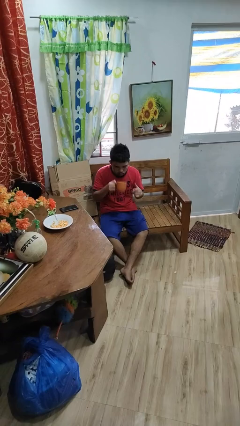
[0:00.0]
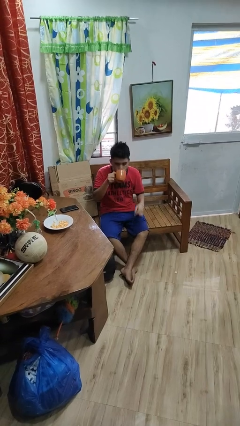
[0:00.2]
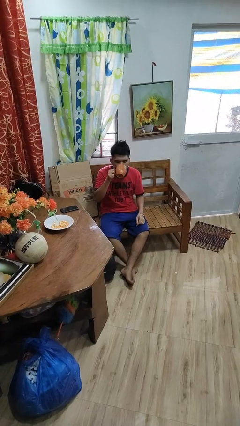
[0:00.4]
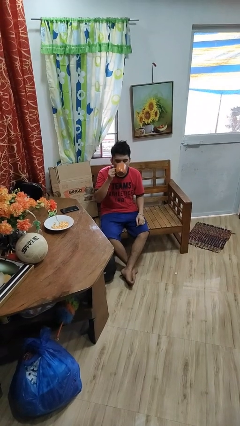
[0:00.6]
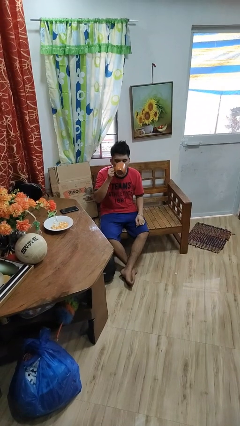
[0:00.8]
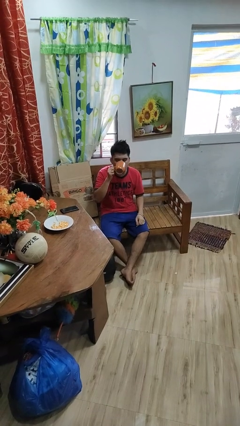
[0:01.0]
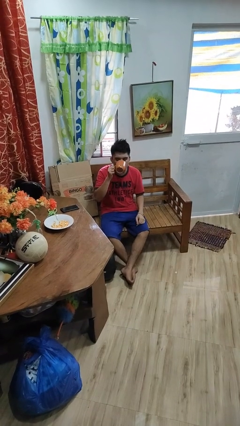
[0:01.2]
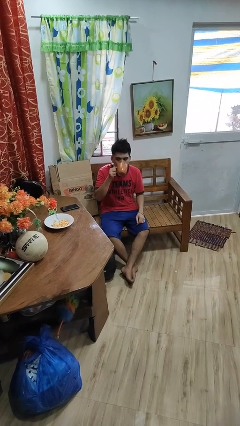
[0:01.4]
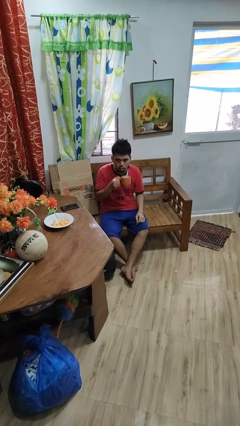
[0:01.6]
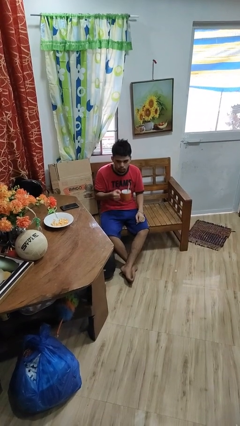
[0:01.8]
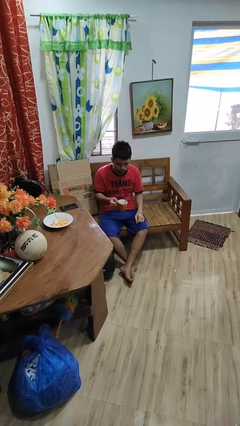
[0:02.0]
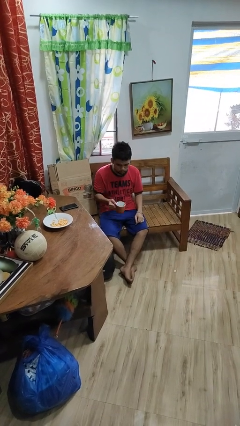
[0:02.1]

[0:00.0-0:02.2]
person drinks from mug

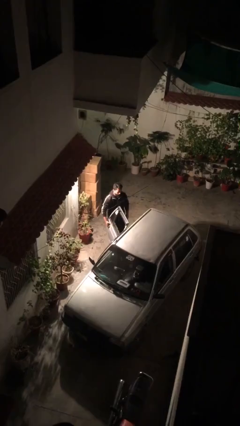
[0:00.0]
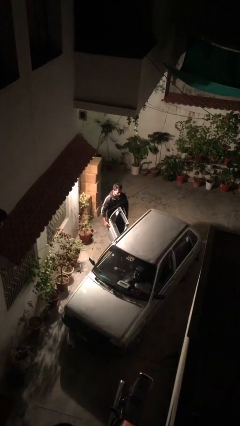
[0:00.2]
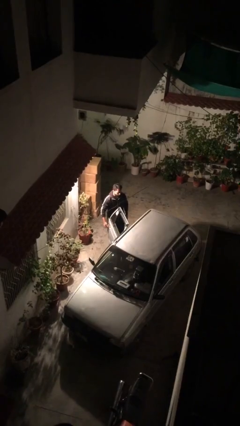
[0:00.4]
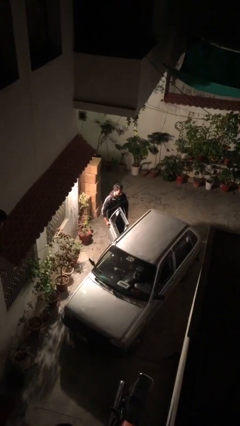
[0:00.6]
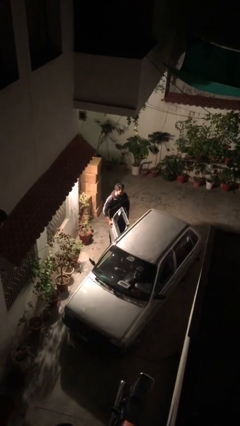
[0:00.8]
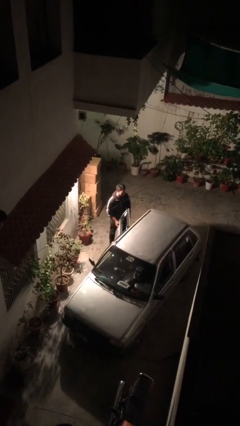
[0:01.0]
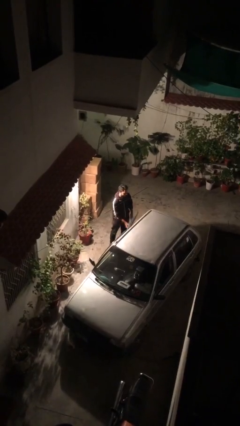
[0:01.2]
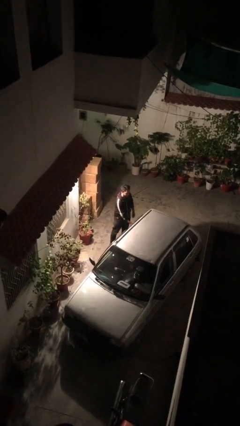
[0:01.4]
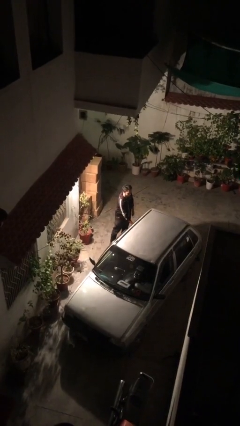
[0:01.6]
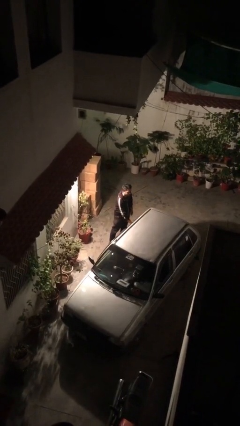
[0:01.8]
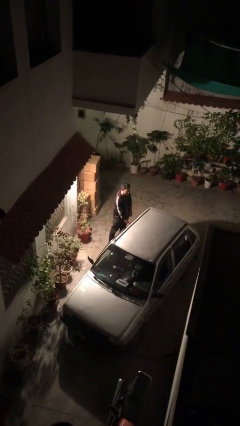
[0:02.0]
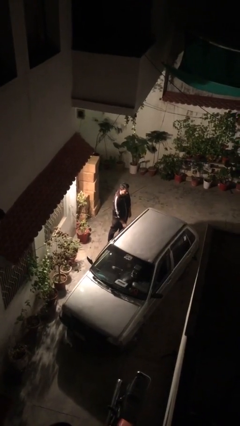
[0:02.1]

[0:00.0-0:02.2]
person closes car door

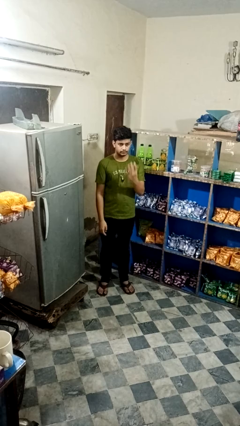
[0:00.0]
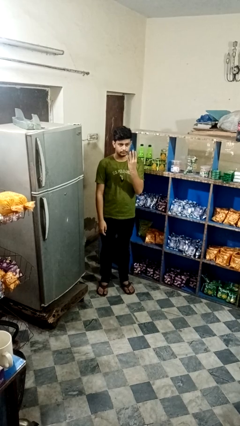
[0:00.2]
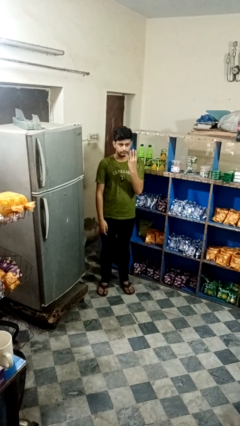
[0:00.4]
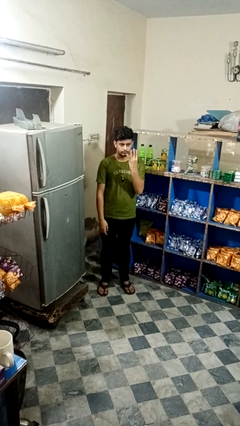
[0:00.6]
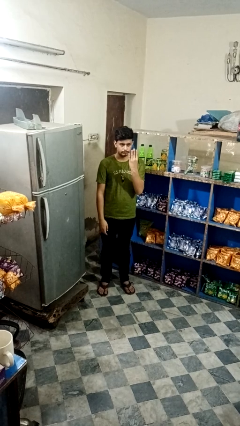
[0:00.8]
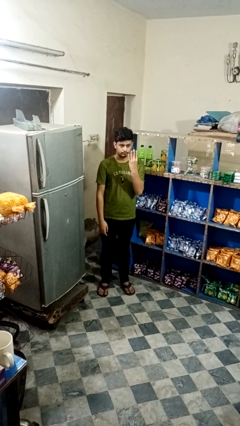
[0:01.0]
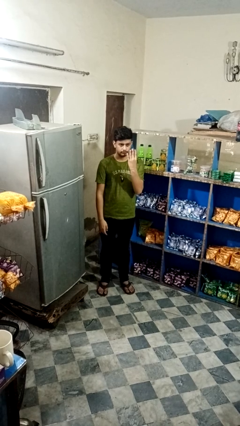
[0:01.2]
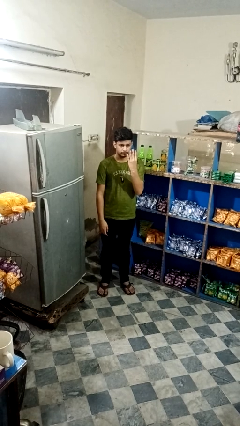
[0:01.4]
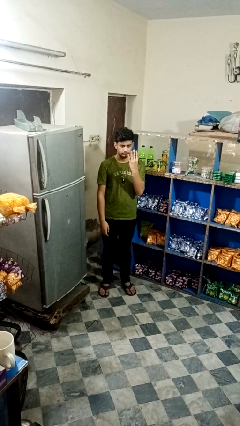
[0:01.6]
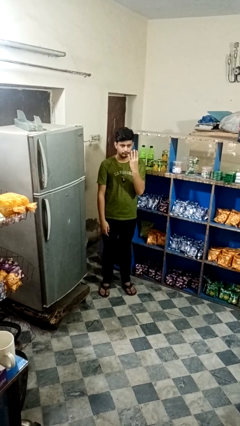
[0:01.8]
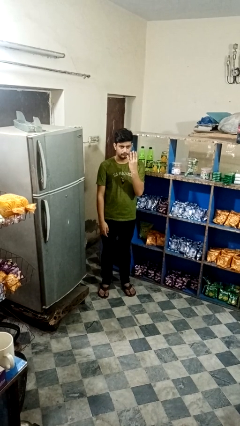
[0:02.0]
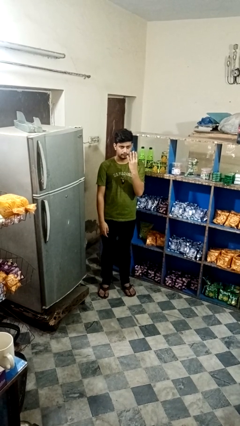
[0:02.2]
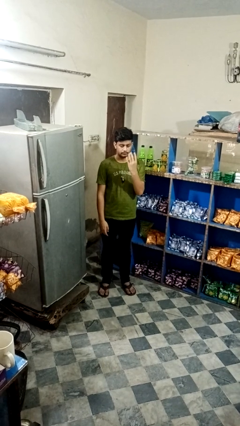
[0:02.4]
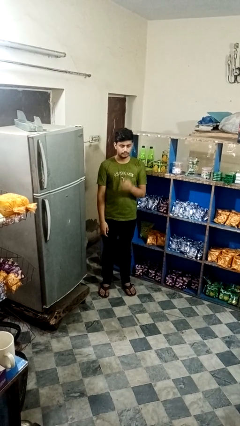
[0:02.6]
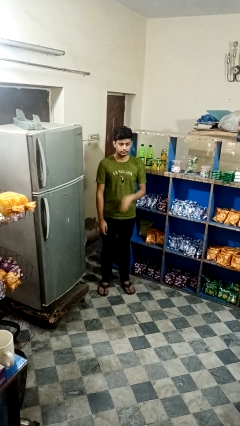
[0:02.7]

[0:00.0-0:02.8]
person gestures number four

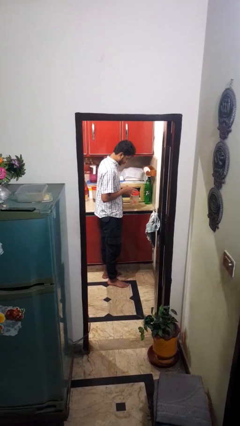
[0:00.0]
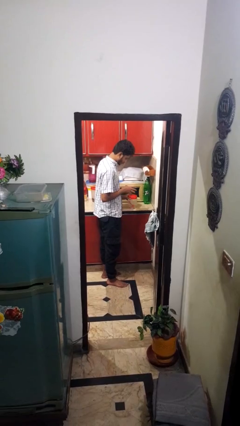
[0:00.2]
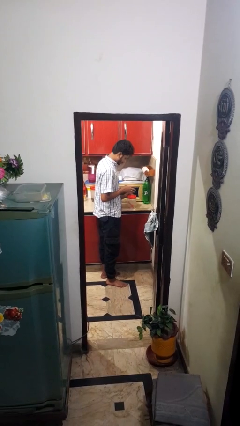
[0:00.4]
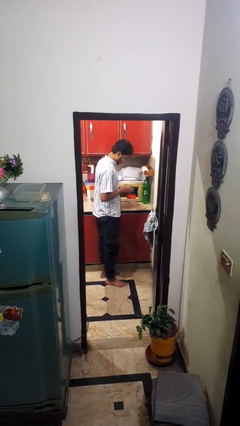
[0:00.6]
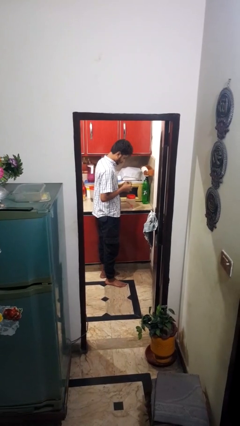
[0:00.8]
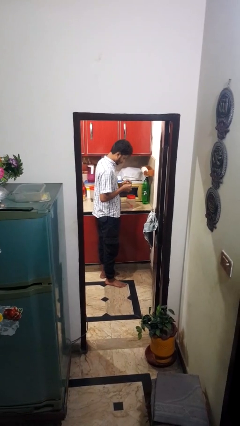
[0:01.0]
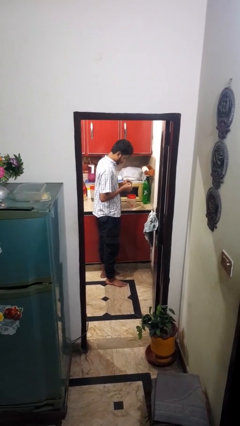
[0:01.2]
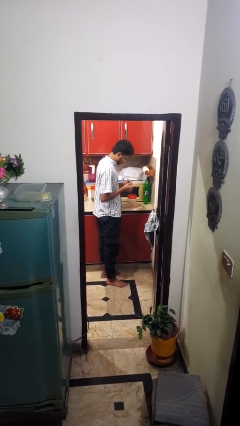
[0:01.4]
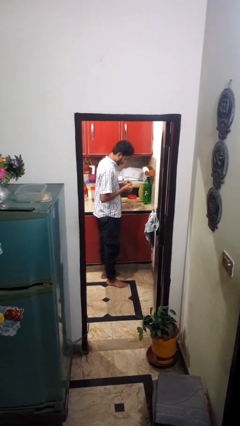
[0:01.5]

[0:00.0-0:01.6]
person puts down object on countertop

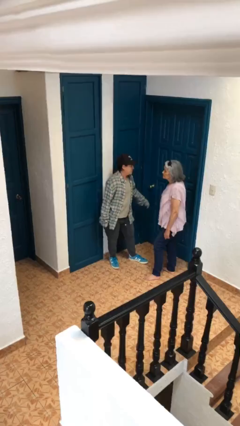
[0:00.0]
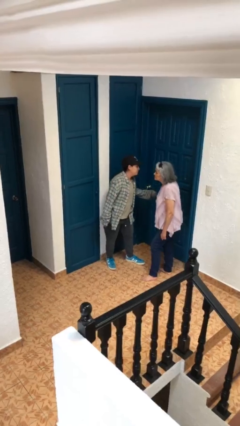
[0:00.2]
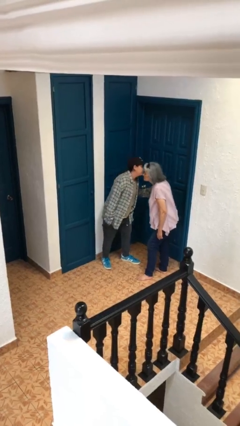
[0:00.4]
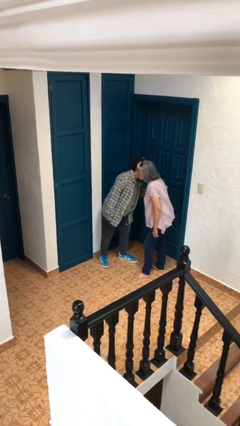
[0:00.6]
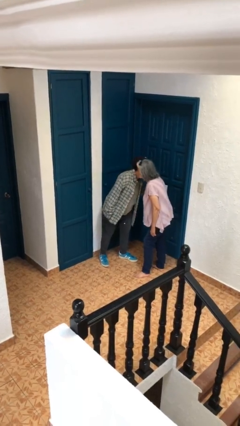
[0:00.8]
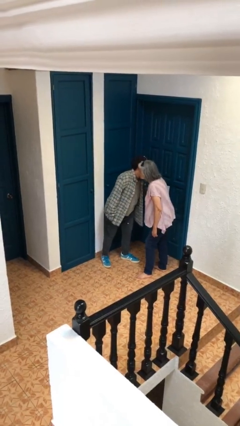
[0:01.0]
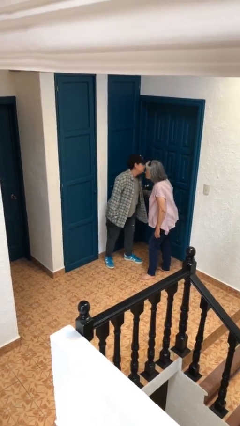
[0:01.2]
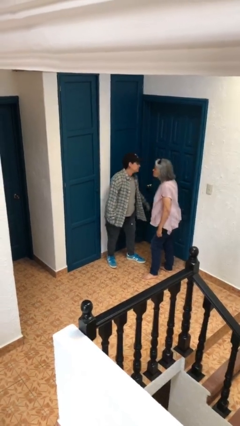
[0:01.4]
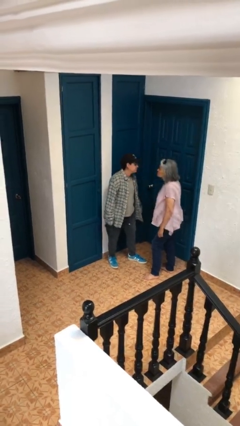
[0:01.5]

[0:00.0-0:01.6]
person kisses cheek of person

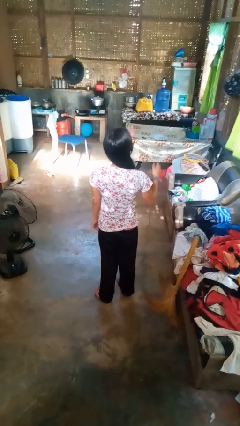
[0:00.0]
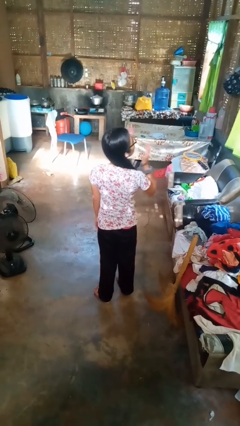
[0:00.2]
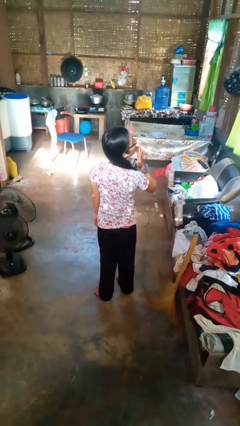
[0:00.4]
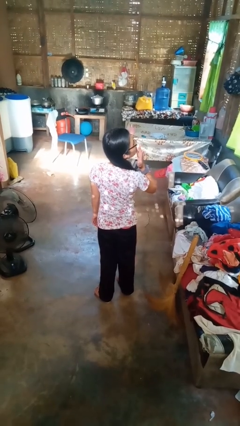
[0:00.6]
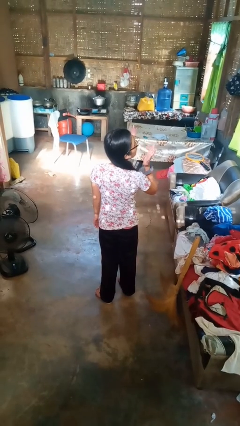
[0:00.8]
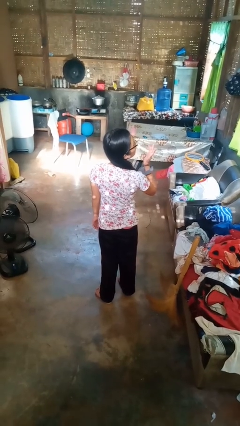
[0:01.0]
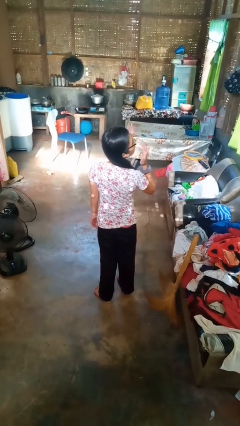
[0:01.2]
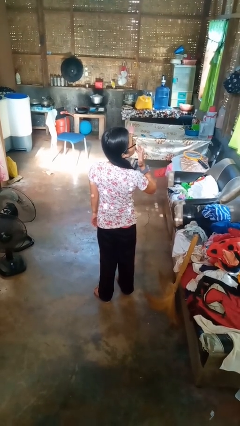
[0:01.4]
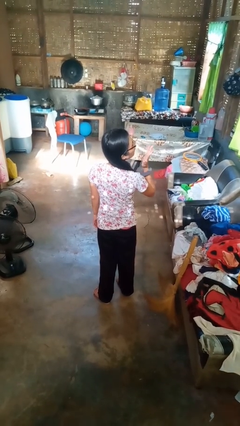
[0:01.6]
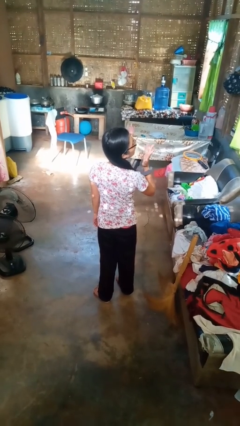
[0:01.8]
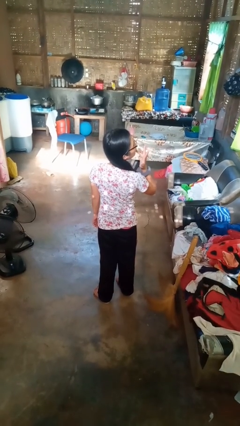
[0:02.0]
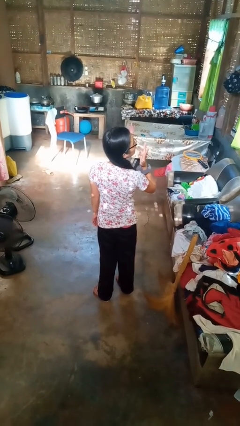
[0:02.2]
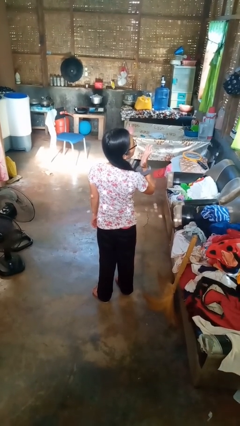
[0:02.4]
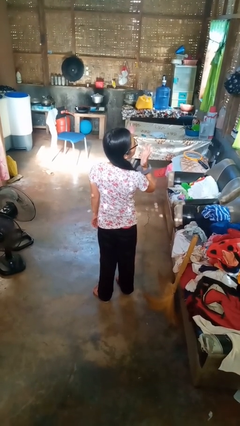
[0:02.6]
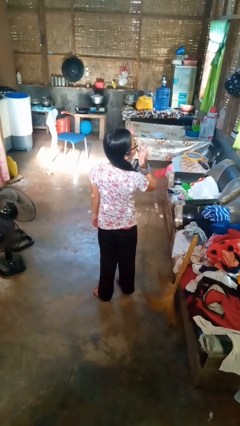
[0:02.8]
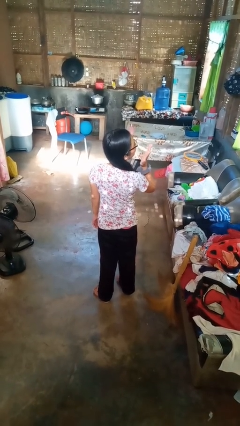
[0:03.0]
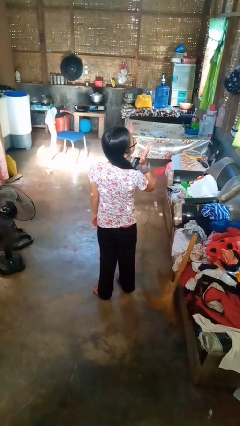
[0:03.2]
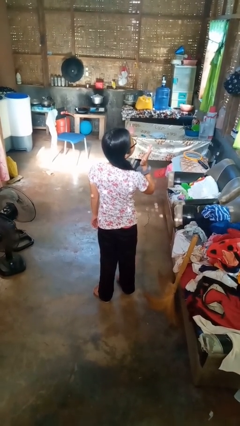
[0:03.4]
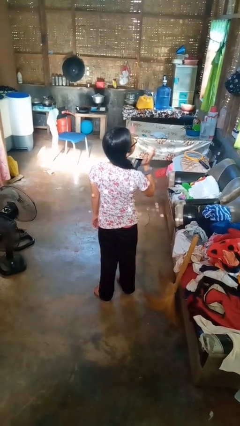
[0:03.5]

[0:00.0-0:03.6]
person licks fingers

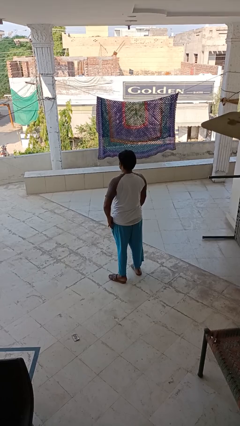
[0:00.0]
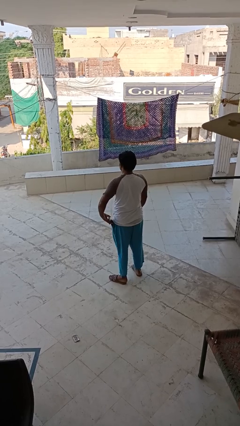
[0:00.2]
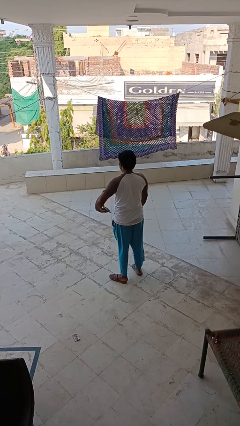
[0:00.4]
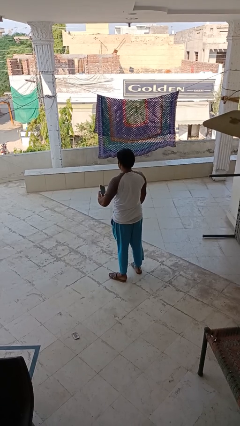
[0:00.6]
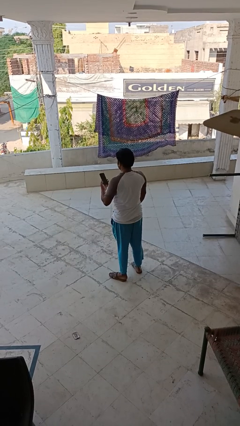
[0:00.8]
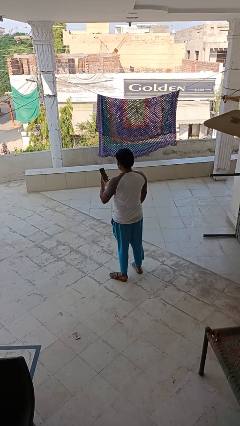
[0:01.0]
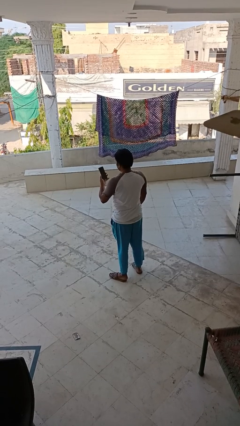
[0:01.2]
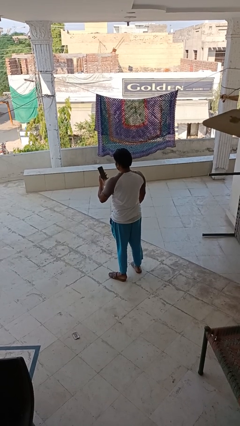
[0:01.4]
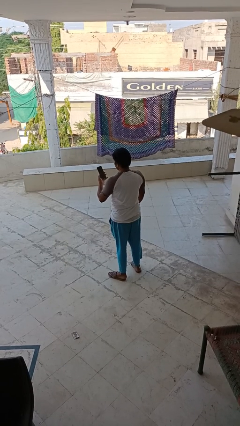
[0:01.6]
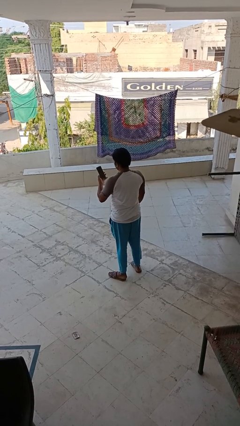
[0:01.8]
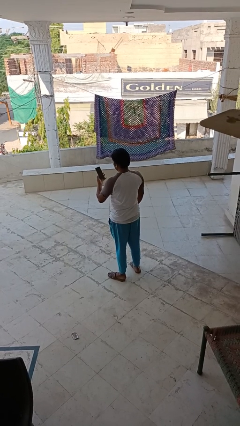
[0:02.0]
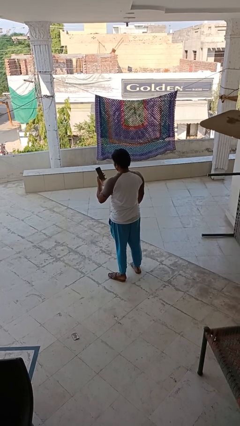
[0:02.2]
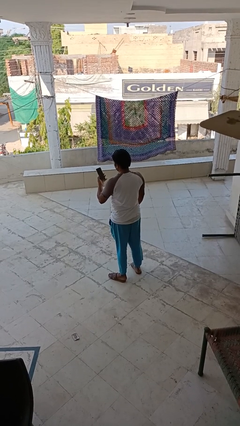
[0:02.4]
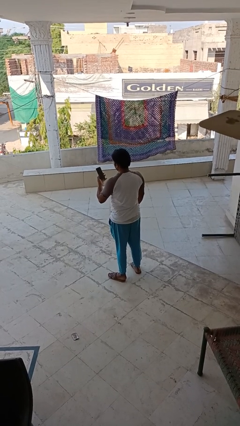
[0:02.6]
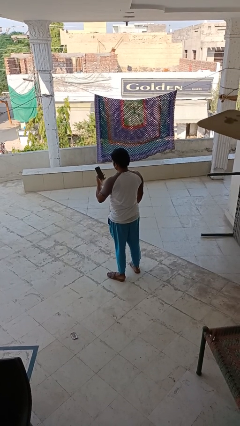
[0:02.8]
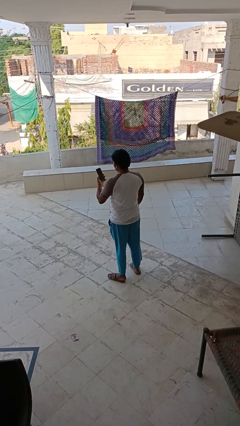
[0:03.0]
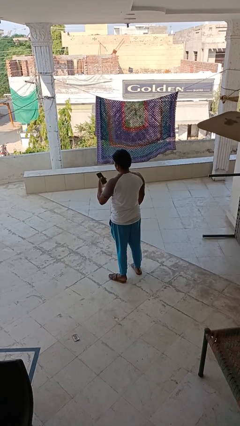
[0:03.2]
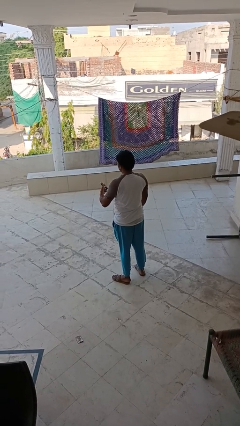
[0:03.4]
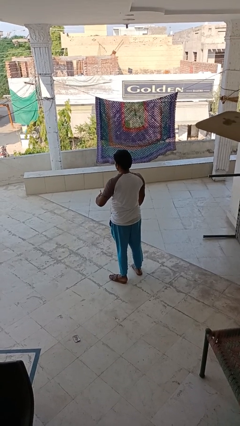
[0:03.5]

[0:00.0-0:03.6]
person takes phone from pocket
